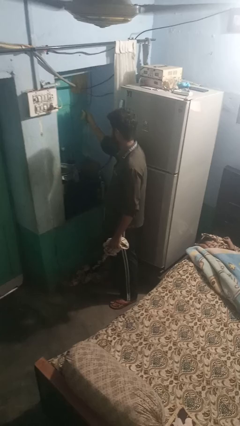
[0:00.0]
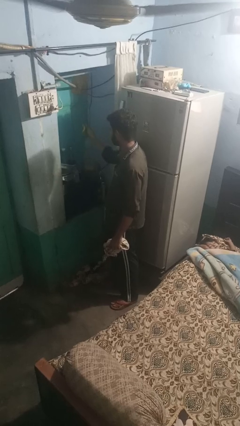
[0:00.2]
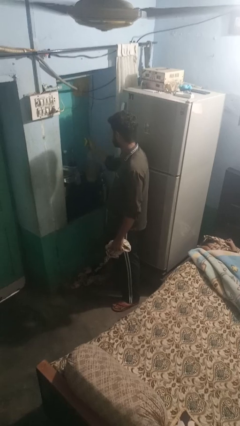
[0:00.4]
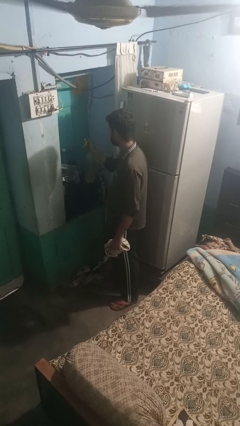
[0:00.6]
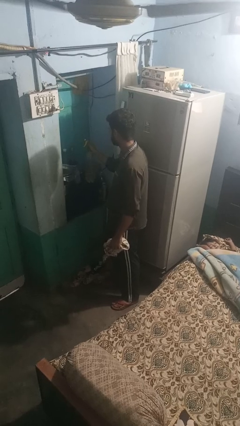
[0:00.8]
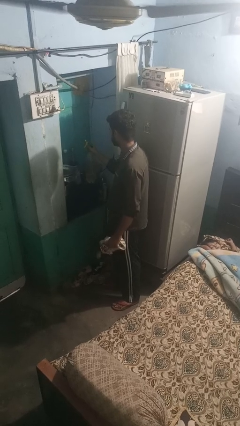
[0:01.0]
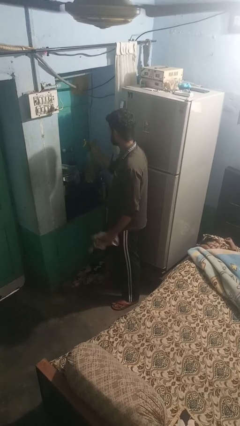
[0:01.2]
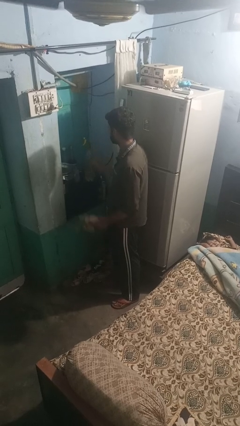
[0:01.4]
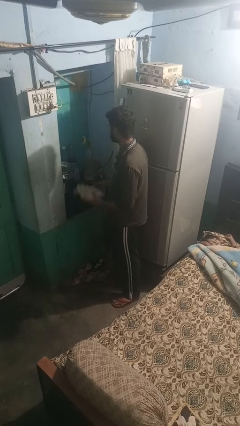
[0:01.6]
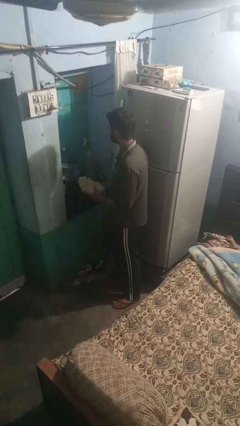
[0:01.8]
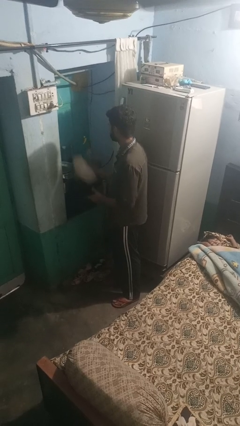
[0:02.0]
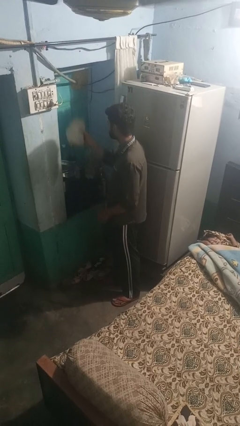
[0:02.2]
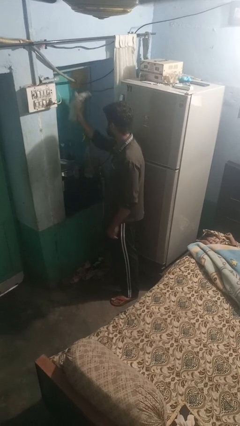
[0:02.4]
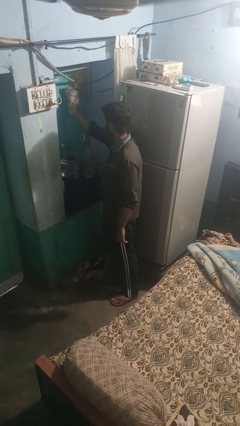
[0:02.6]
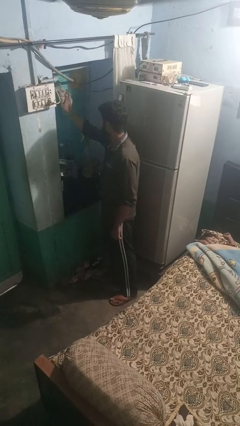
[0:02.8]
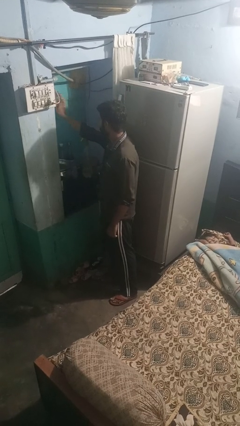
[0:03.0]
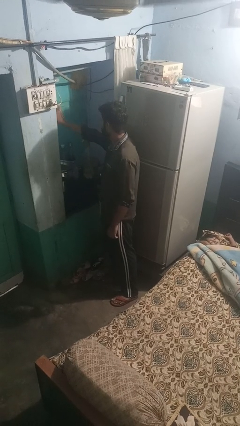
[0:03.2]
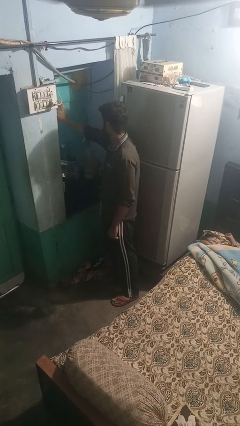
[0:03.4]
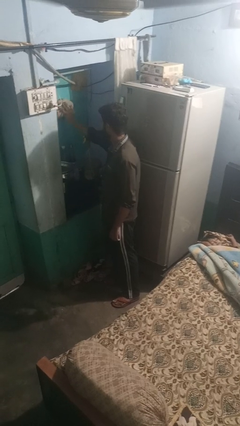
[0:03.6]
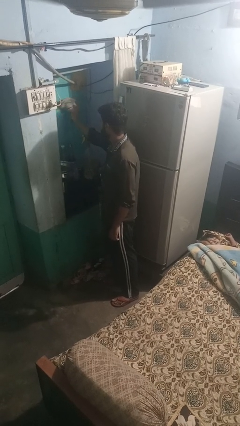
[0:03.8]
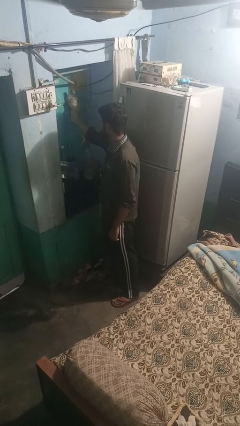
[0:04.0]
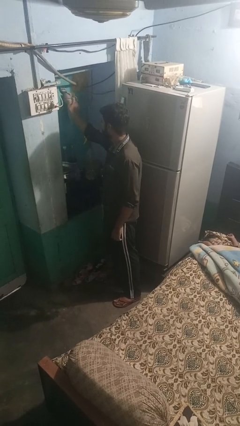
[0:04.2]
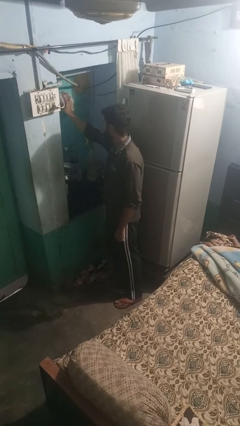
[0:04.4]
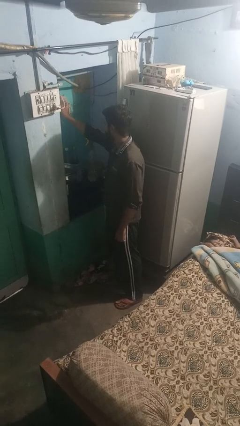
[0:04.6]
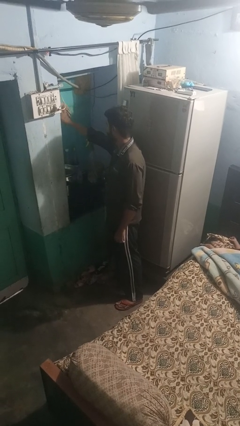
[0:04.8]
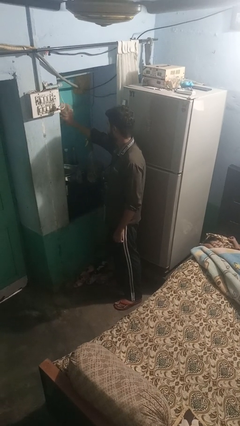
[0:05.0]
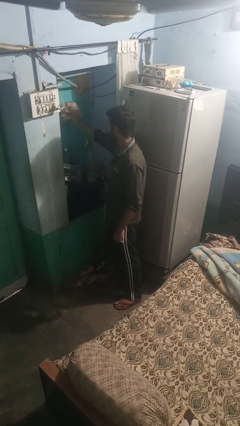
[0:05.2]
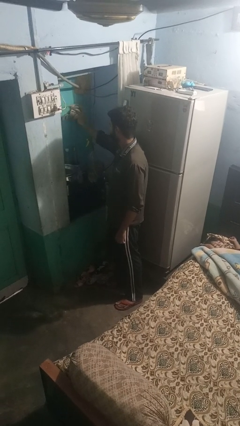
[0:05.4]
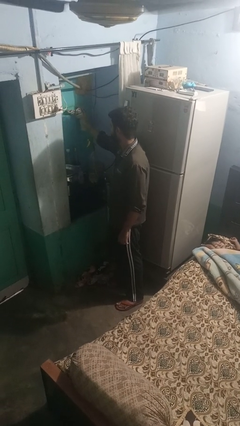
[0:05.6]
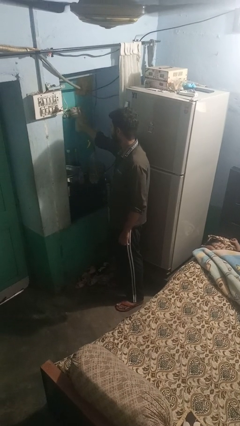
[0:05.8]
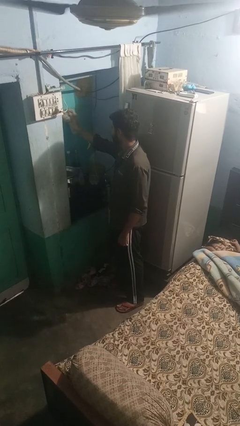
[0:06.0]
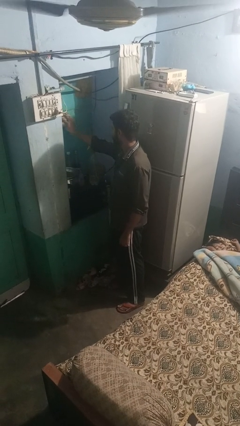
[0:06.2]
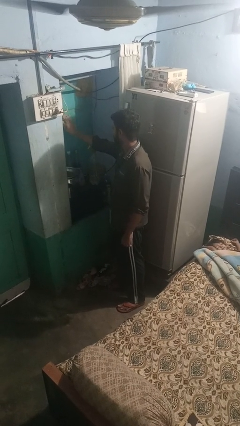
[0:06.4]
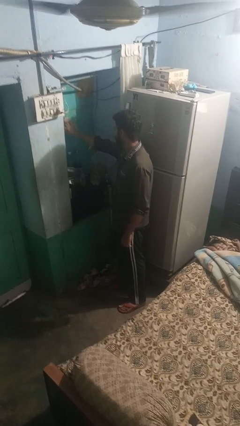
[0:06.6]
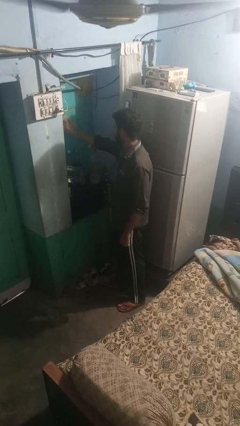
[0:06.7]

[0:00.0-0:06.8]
person washes window

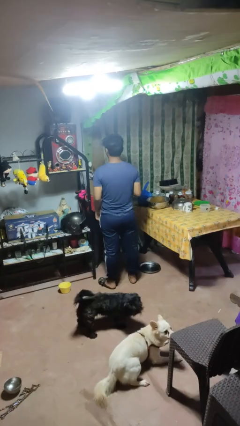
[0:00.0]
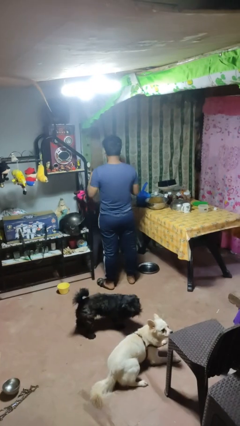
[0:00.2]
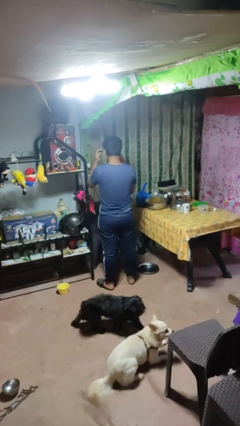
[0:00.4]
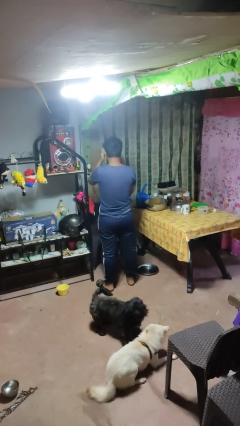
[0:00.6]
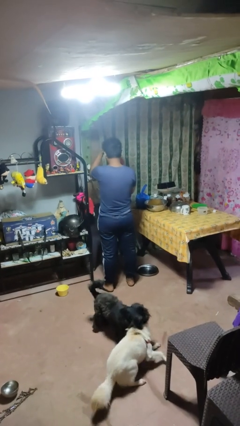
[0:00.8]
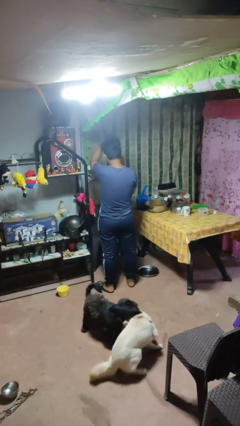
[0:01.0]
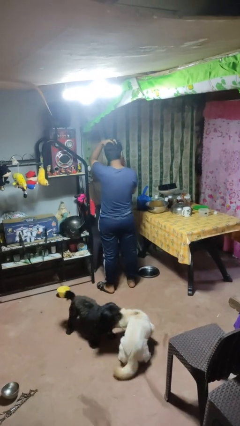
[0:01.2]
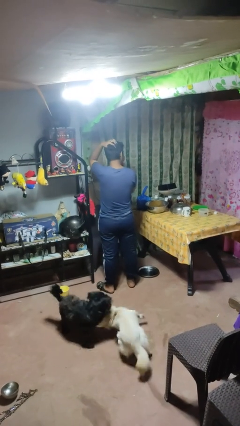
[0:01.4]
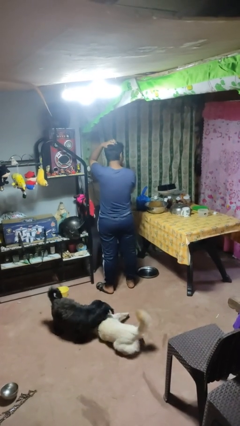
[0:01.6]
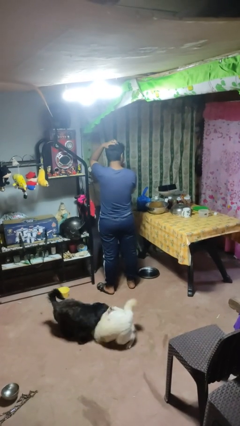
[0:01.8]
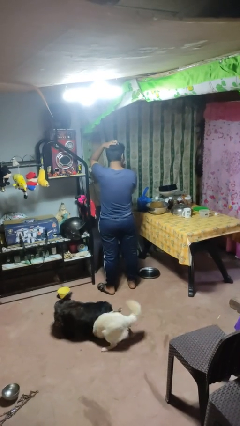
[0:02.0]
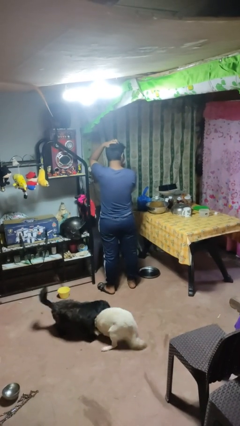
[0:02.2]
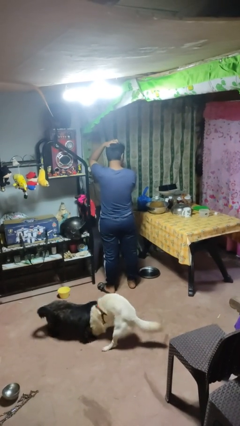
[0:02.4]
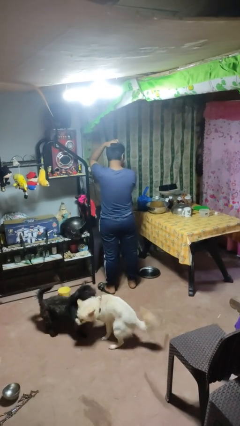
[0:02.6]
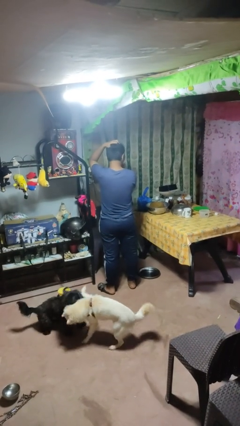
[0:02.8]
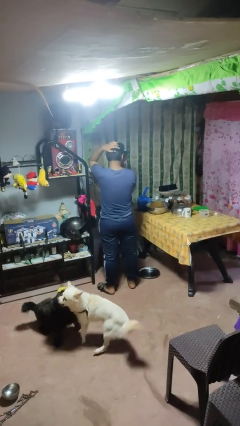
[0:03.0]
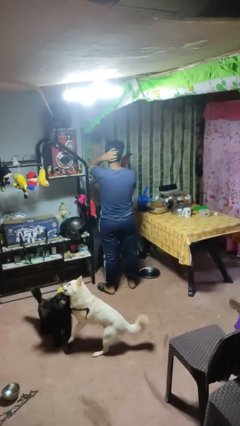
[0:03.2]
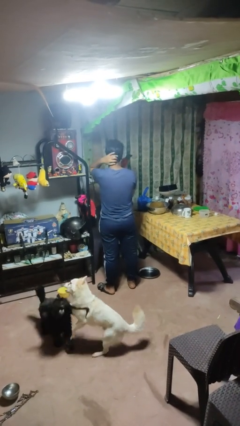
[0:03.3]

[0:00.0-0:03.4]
person dries hair with hairdryer

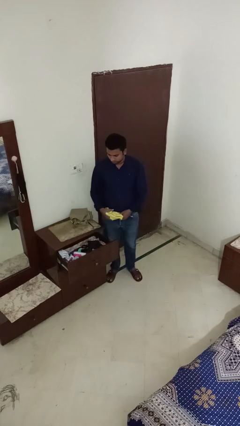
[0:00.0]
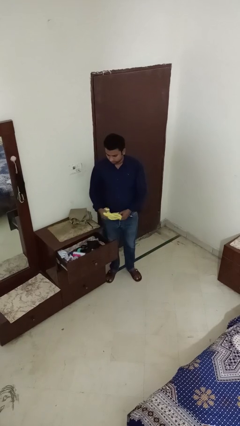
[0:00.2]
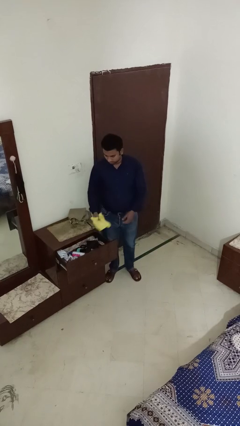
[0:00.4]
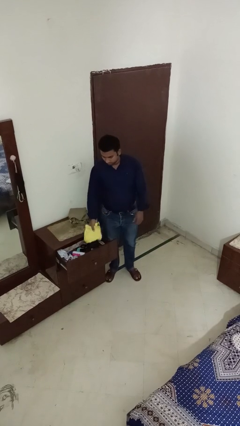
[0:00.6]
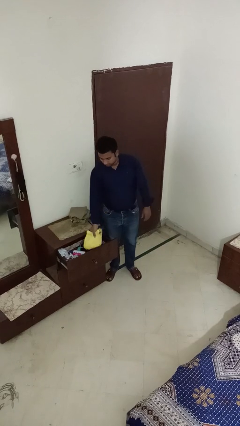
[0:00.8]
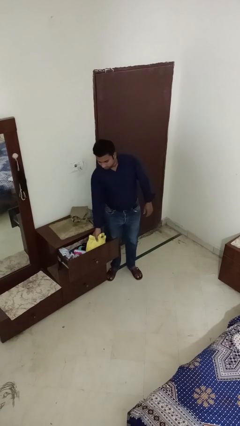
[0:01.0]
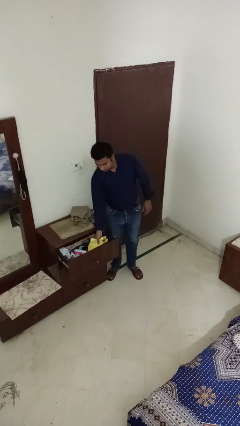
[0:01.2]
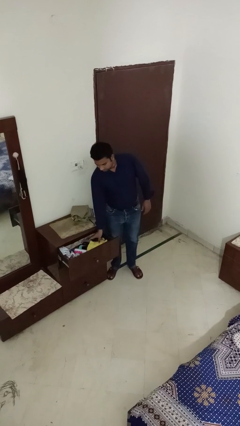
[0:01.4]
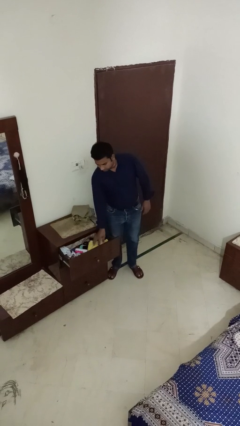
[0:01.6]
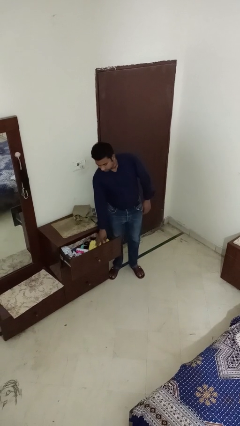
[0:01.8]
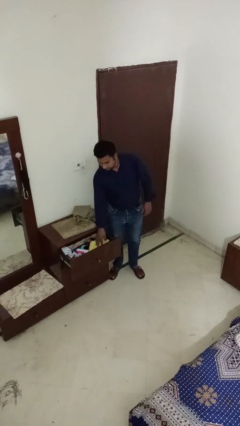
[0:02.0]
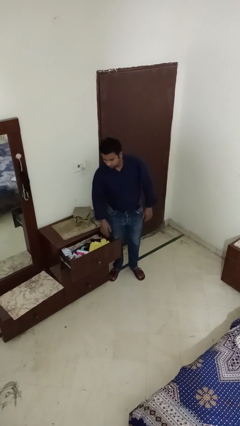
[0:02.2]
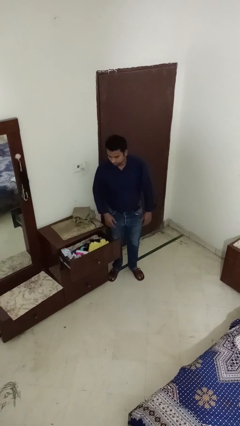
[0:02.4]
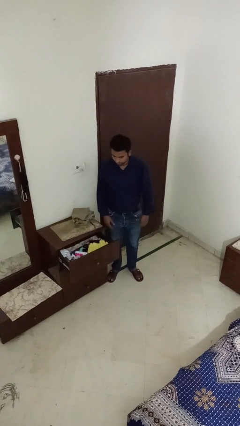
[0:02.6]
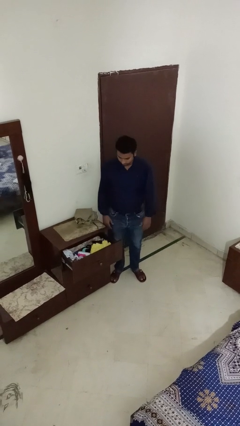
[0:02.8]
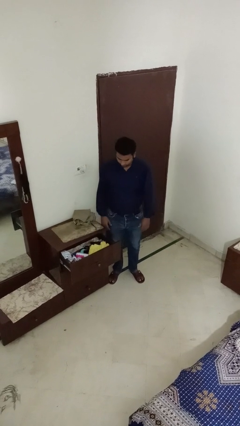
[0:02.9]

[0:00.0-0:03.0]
person puts clothes into dresser

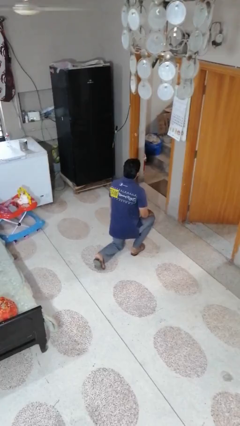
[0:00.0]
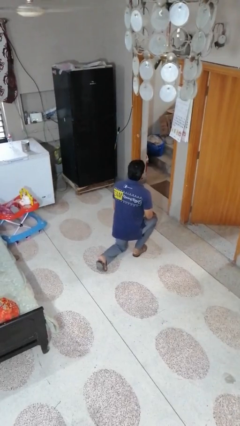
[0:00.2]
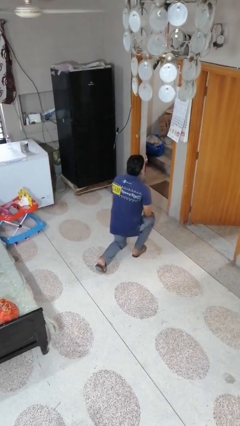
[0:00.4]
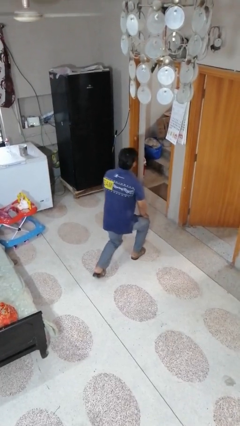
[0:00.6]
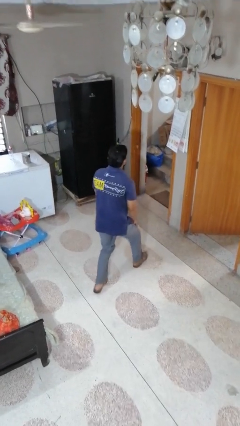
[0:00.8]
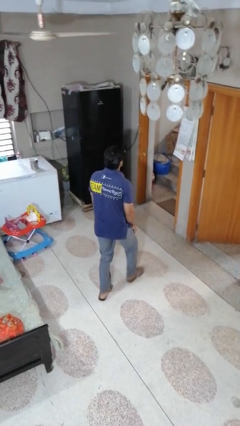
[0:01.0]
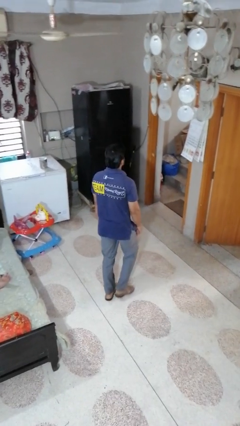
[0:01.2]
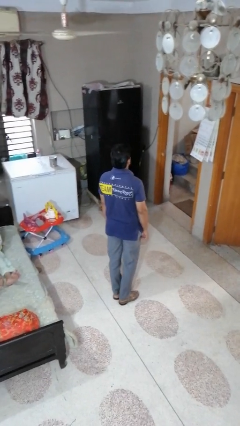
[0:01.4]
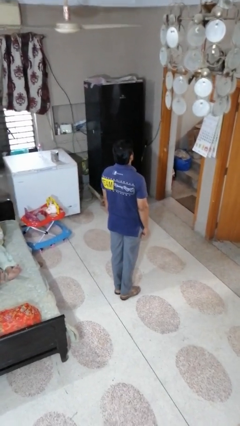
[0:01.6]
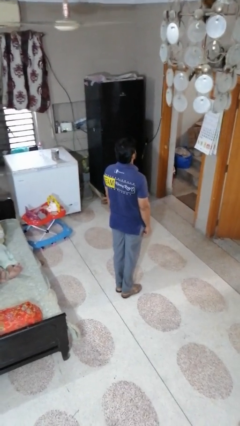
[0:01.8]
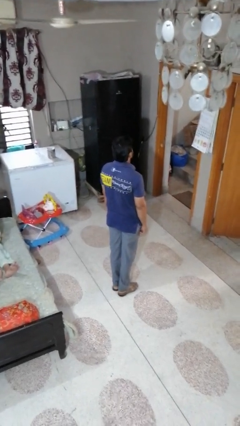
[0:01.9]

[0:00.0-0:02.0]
person stands up from floor

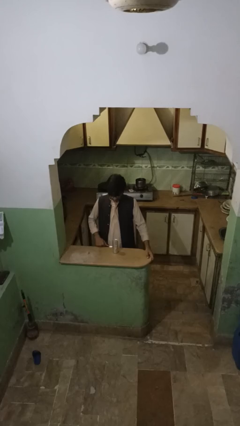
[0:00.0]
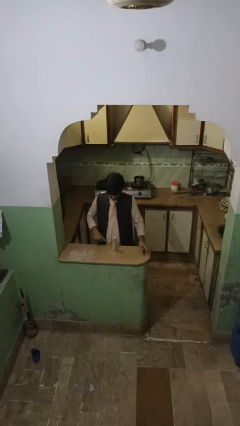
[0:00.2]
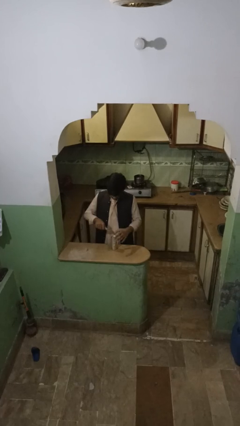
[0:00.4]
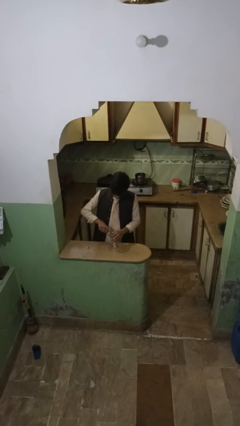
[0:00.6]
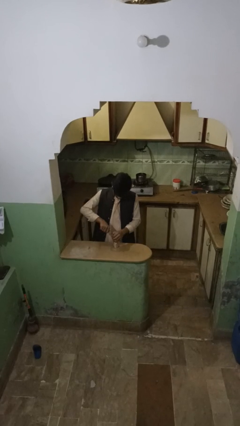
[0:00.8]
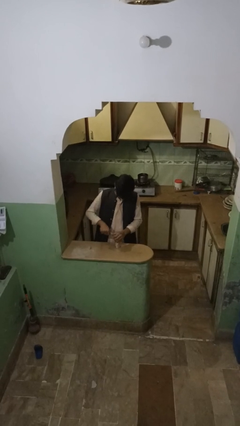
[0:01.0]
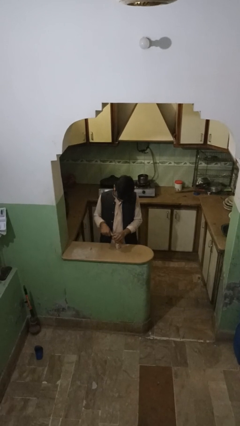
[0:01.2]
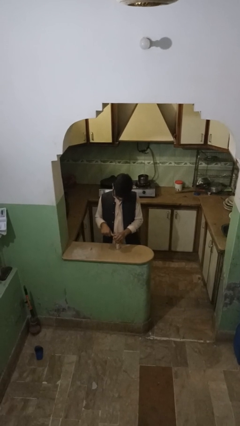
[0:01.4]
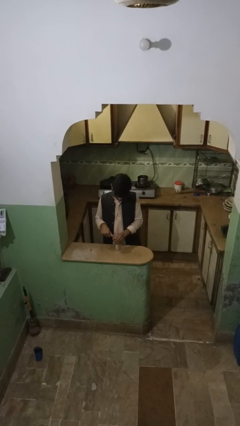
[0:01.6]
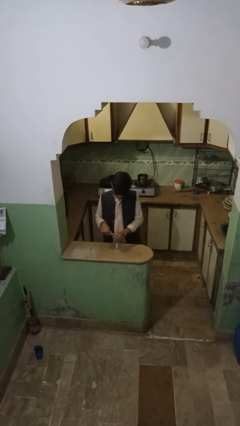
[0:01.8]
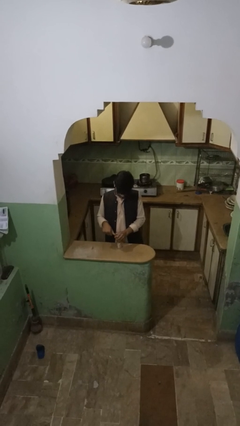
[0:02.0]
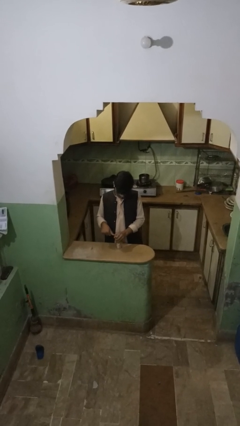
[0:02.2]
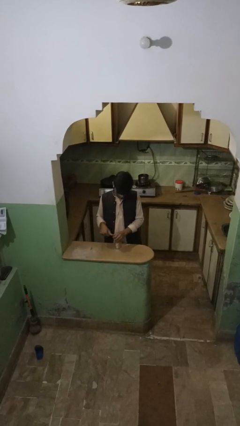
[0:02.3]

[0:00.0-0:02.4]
person opens can with can opener

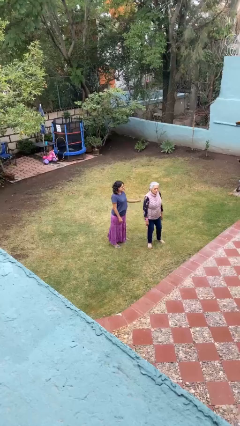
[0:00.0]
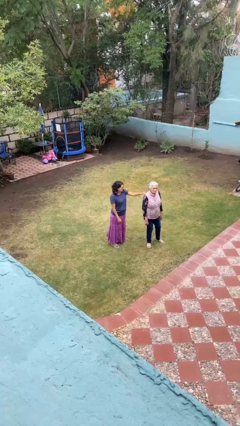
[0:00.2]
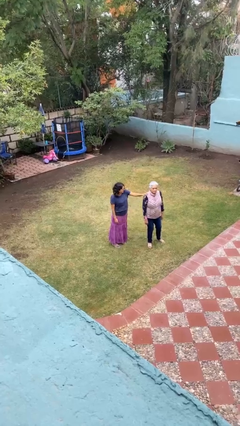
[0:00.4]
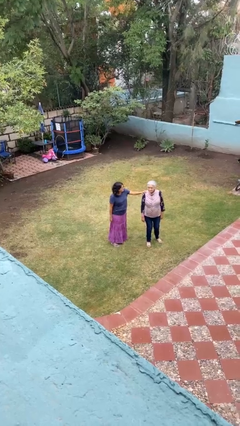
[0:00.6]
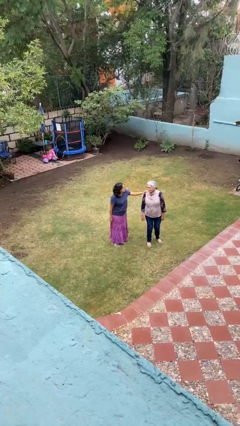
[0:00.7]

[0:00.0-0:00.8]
person grabs person by shoulder
